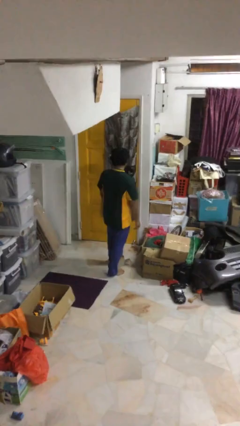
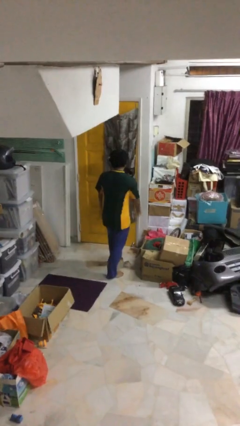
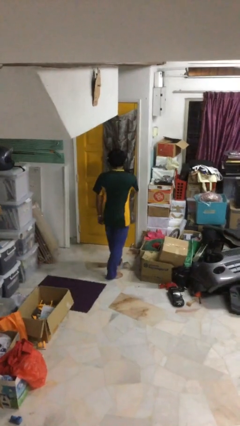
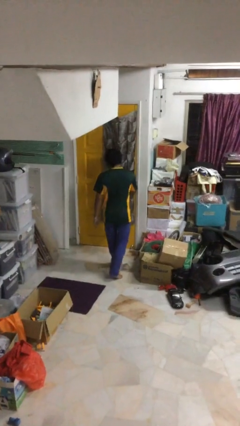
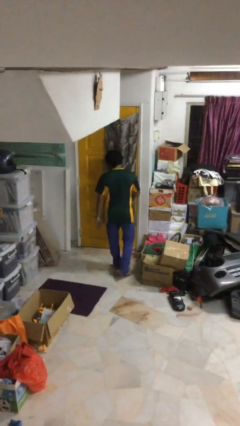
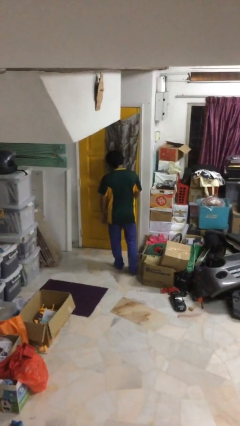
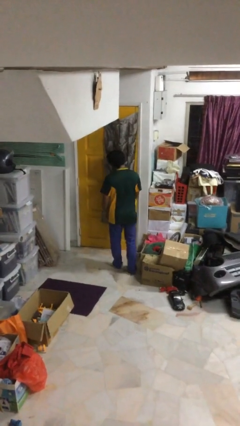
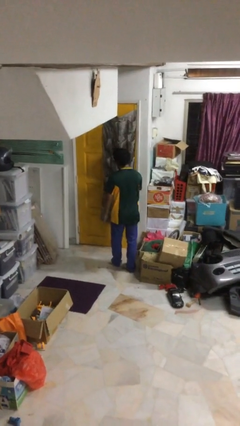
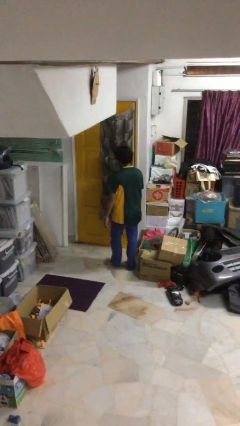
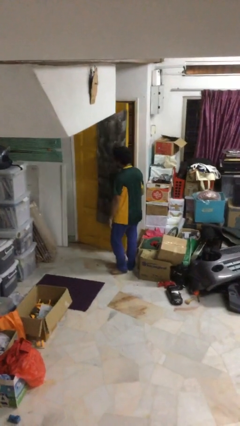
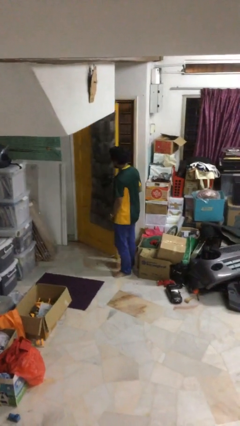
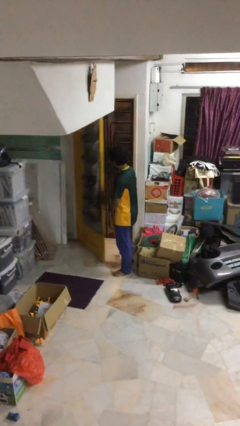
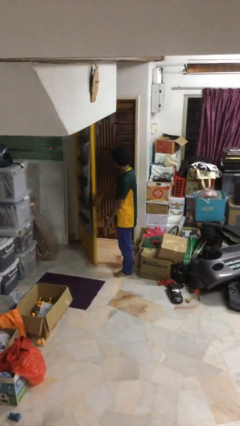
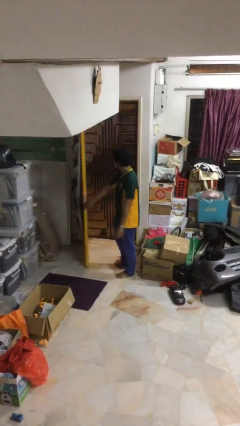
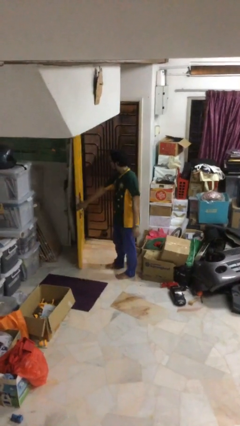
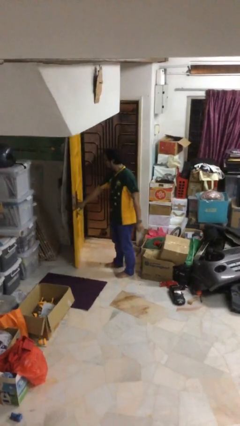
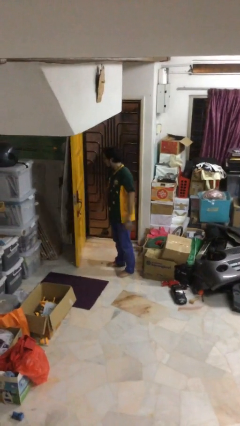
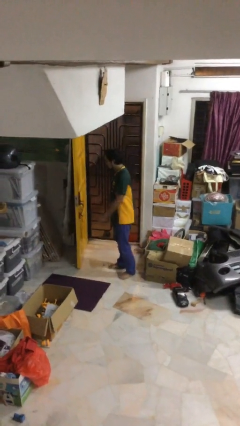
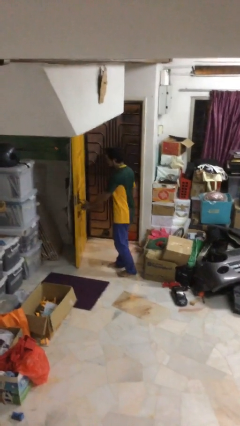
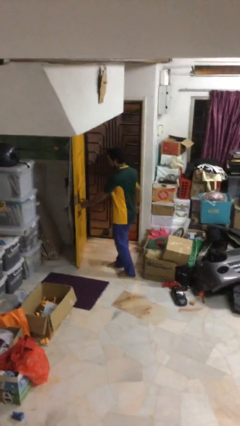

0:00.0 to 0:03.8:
person opens facility door

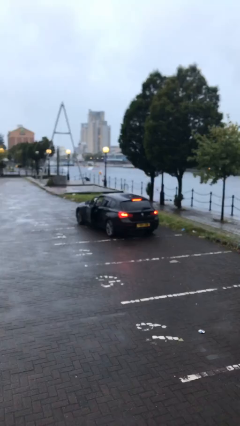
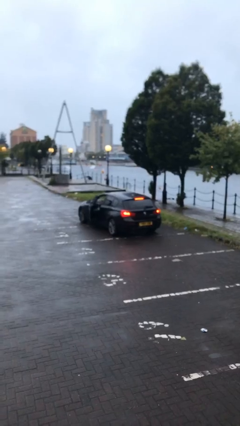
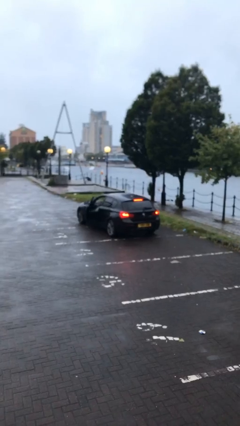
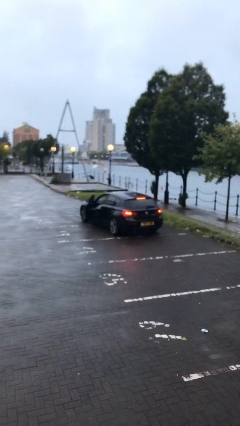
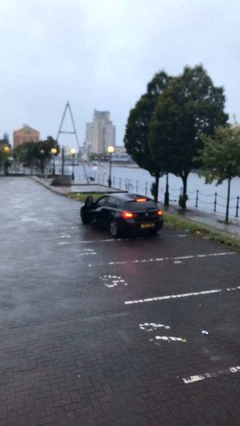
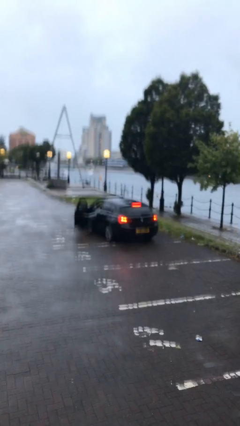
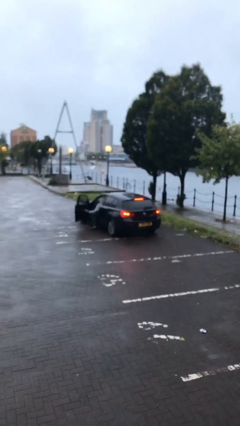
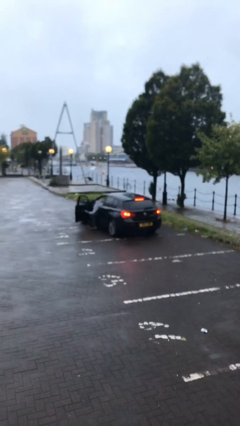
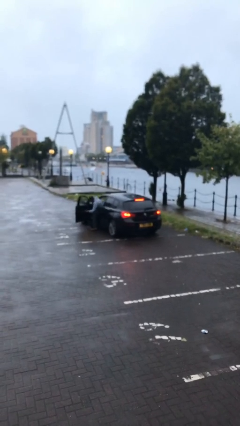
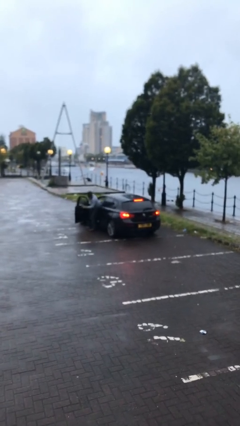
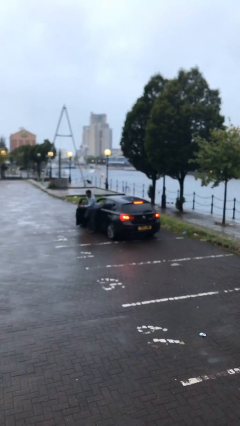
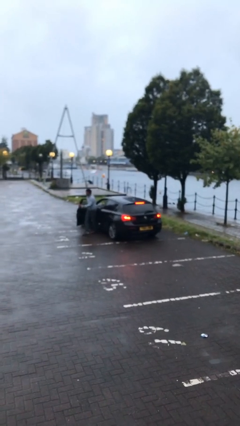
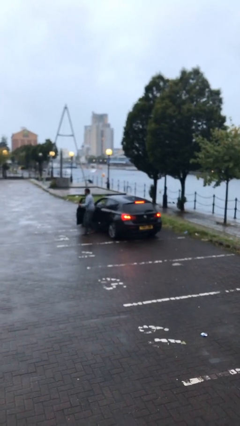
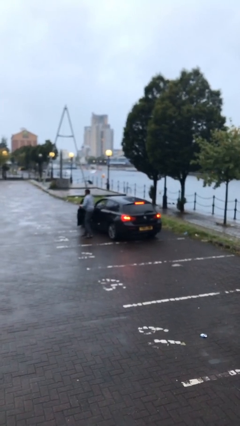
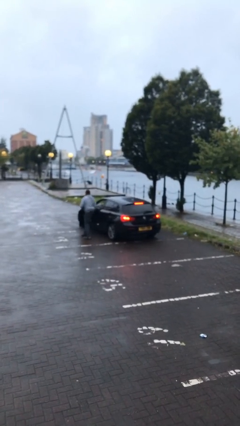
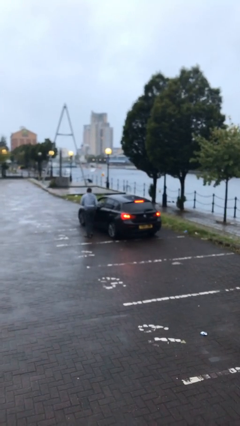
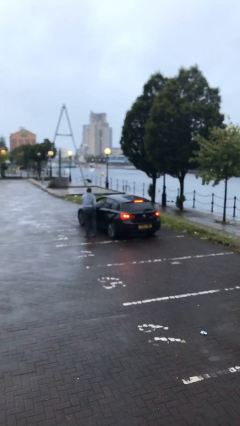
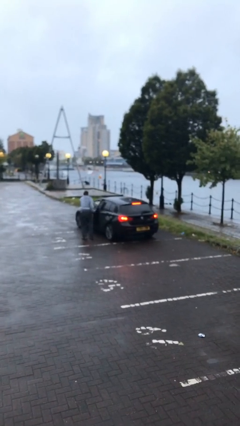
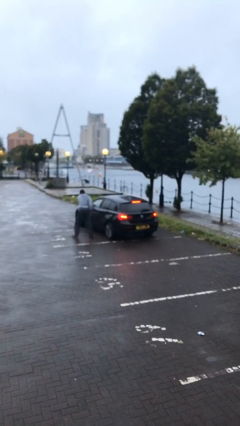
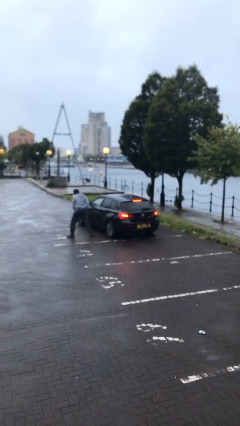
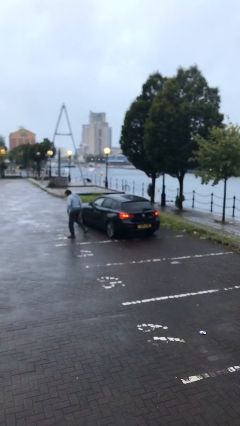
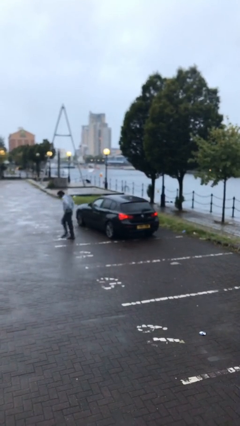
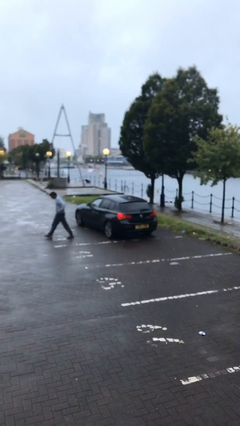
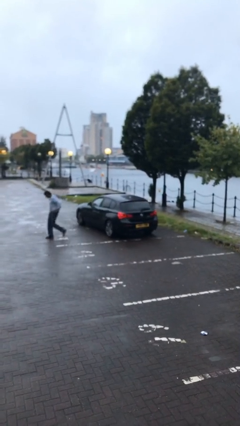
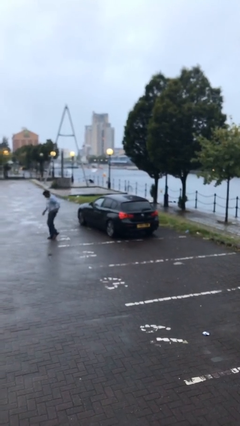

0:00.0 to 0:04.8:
car drops off person

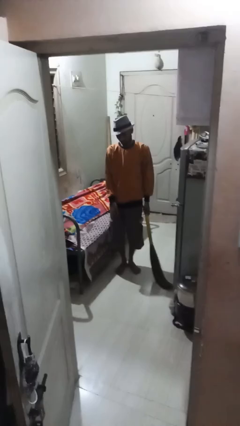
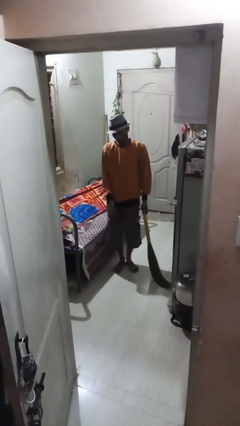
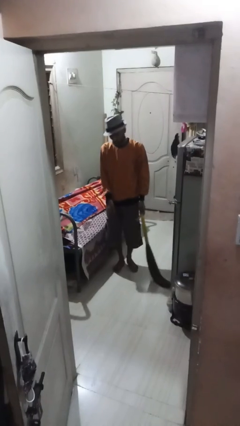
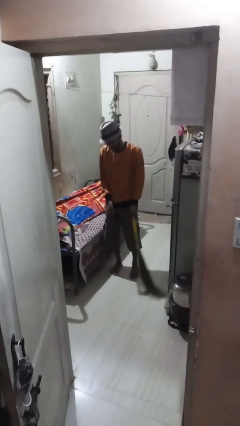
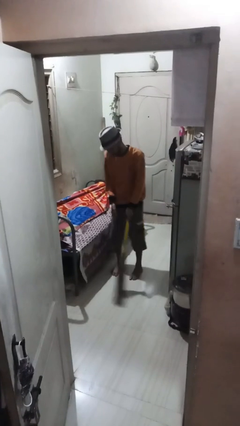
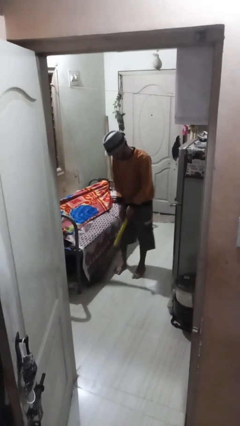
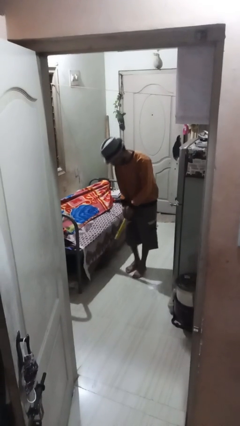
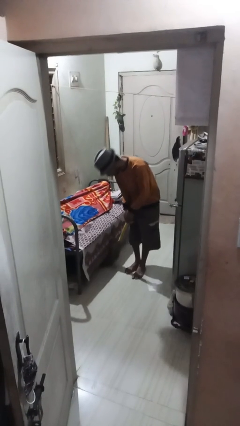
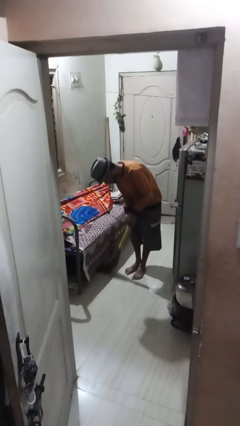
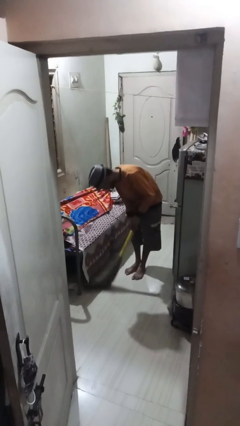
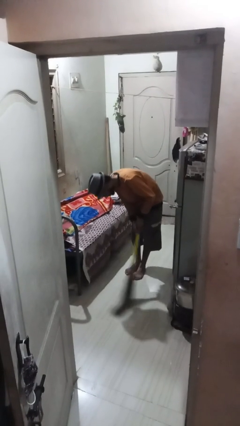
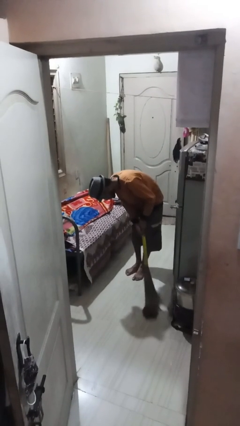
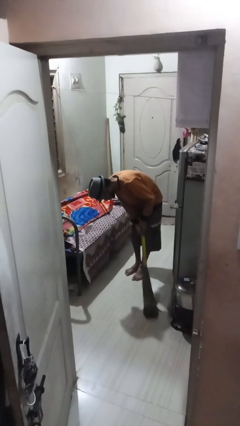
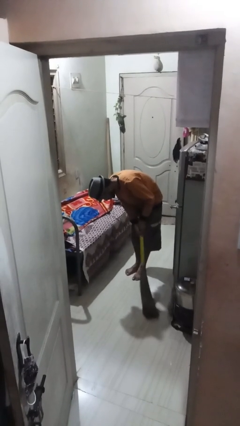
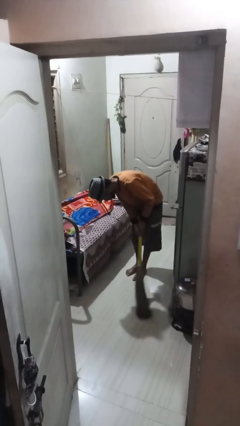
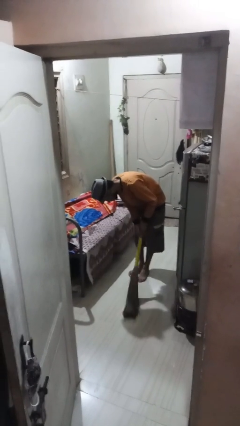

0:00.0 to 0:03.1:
person sweeps floor

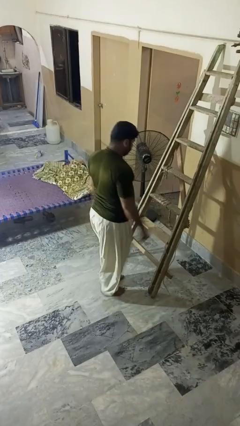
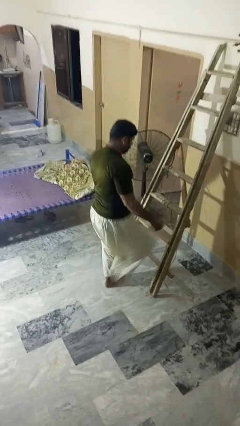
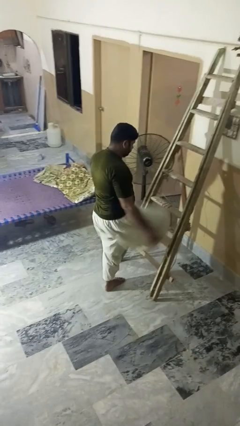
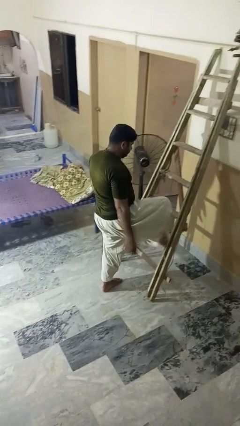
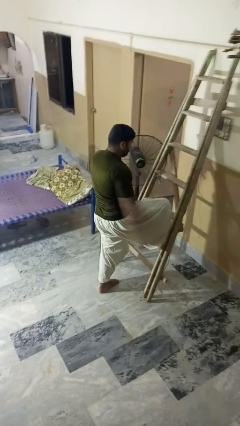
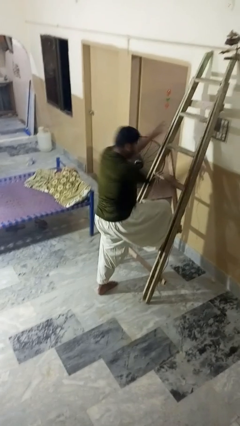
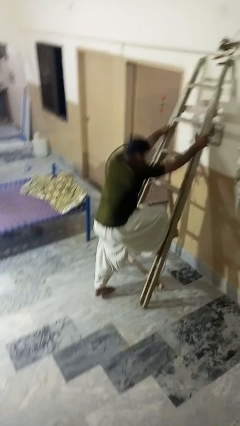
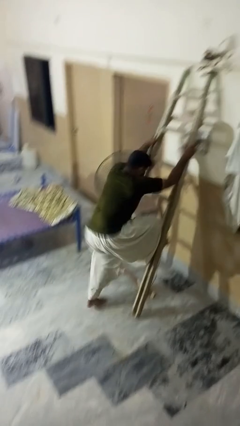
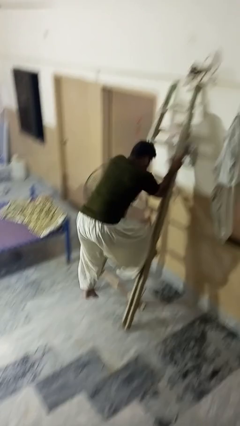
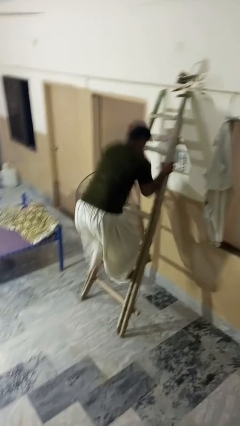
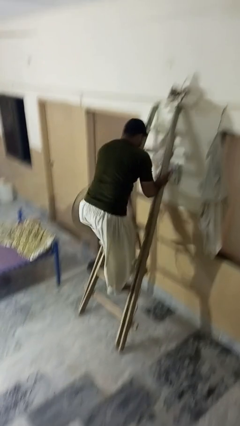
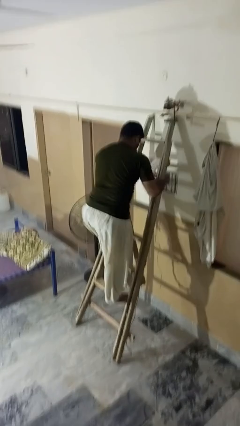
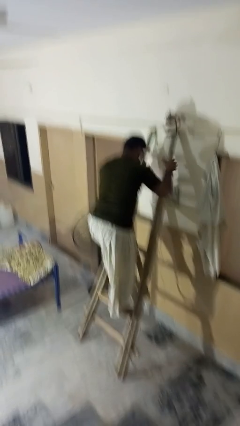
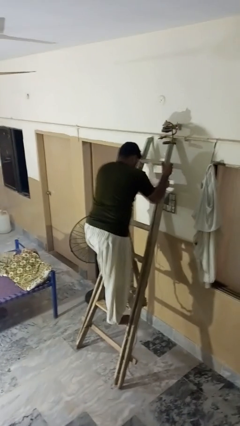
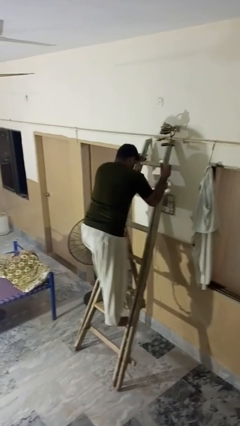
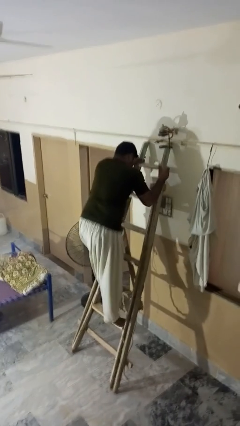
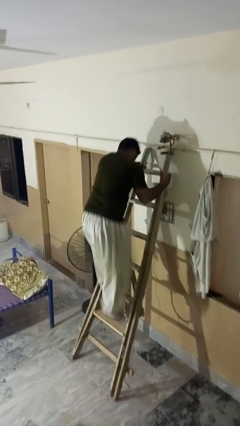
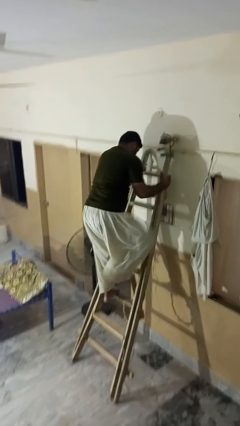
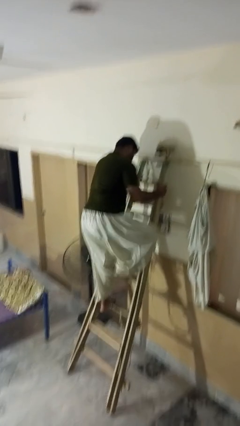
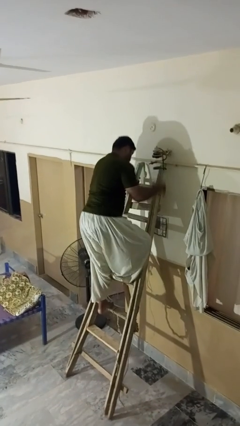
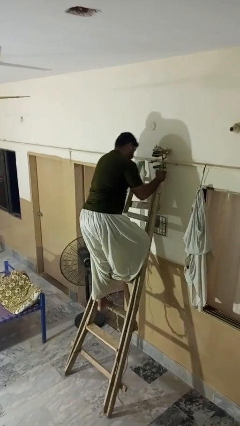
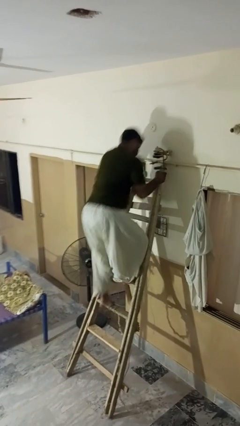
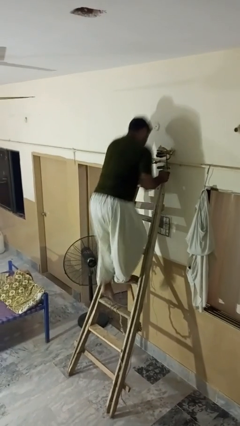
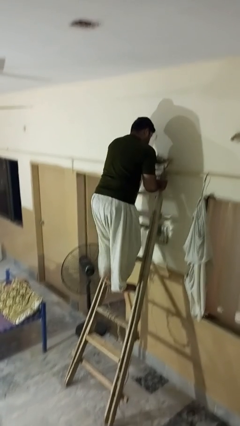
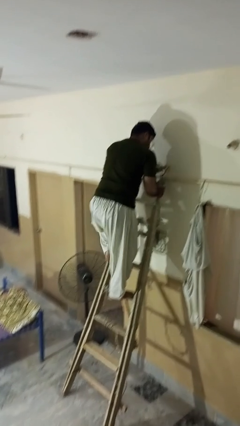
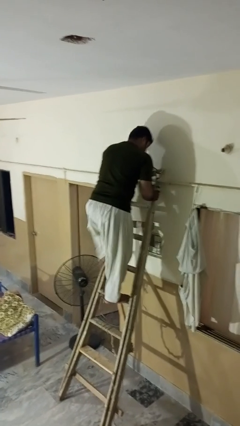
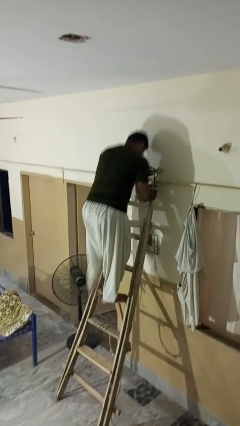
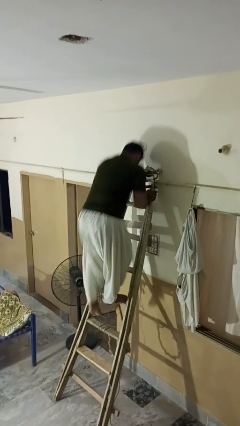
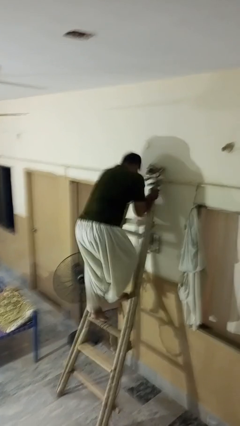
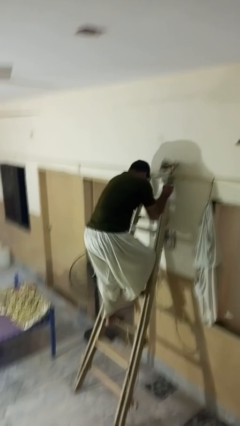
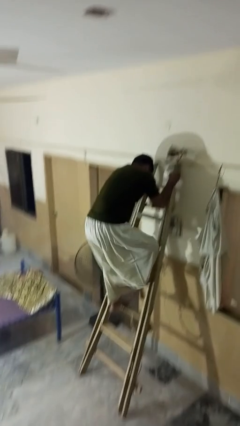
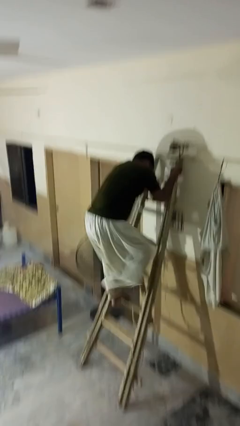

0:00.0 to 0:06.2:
person climbs up ladder
